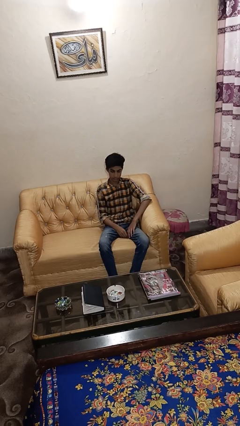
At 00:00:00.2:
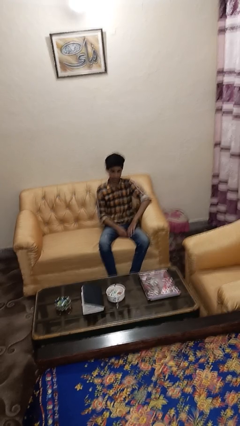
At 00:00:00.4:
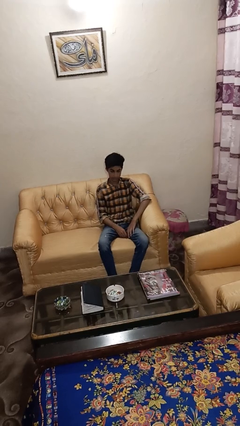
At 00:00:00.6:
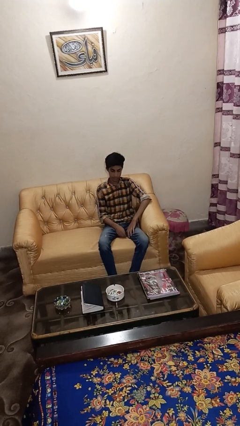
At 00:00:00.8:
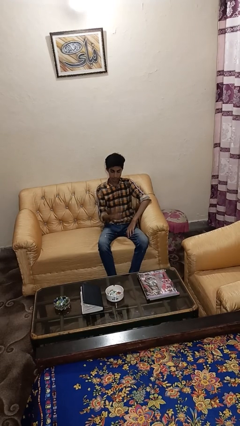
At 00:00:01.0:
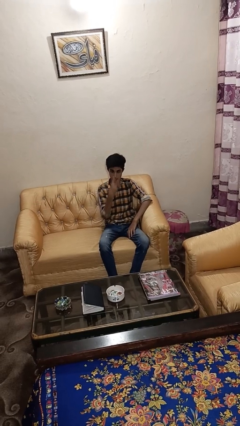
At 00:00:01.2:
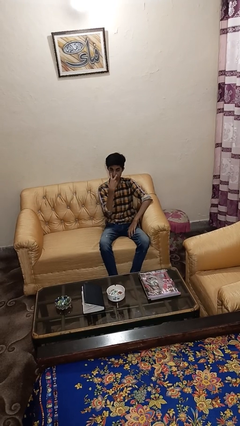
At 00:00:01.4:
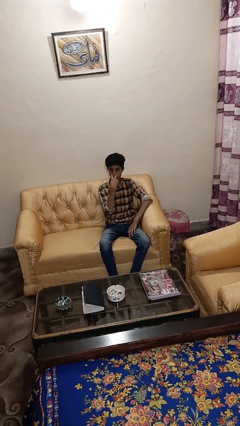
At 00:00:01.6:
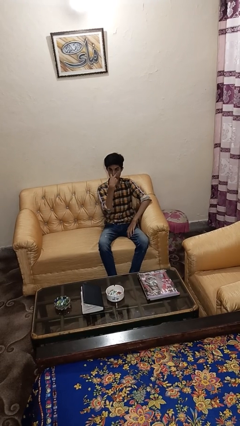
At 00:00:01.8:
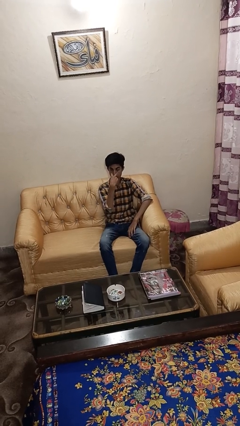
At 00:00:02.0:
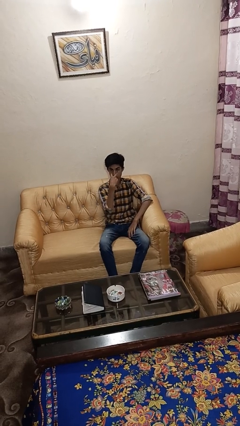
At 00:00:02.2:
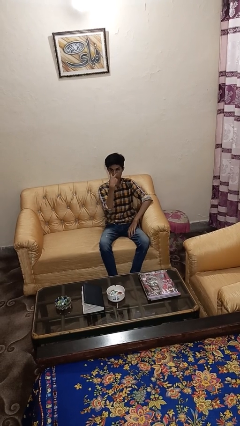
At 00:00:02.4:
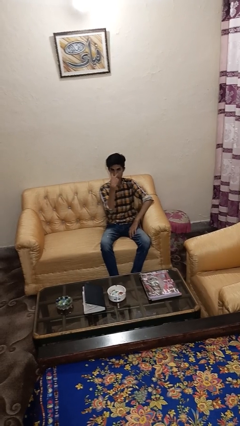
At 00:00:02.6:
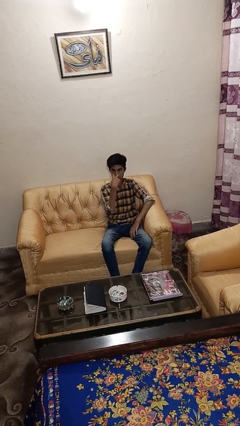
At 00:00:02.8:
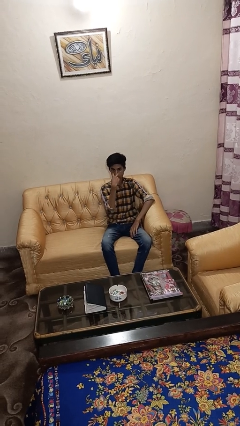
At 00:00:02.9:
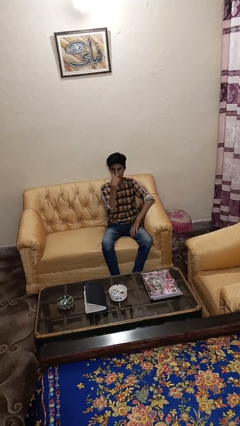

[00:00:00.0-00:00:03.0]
person gestures watch closely

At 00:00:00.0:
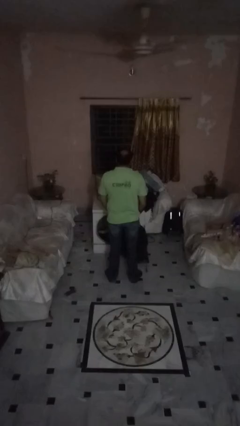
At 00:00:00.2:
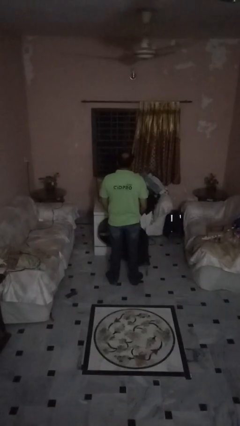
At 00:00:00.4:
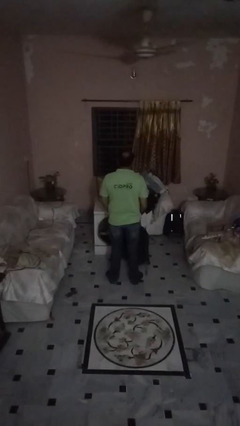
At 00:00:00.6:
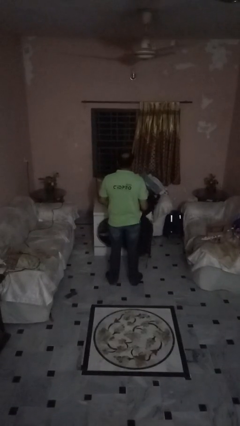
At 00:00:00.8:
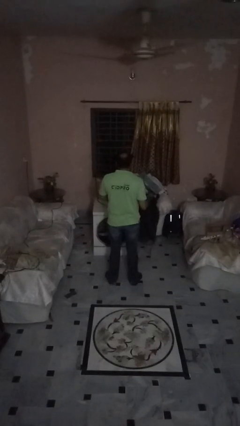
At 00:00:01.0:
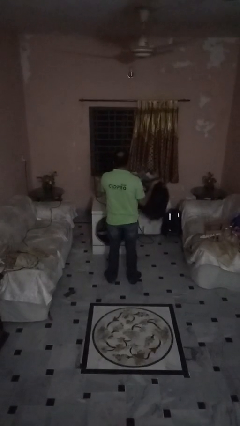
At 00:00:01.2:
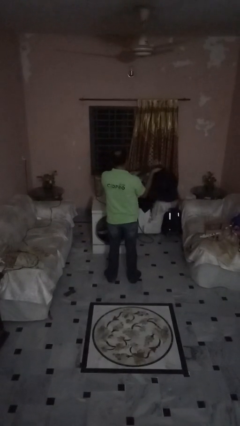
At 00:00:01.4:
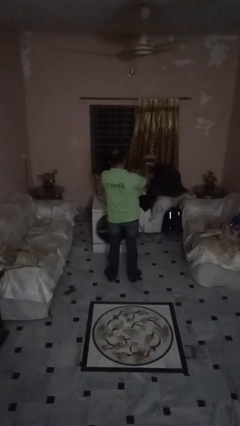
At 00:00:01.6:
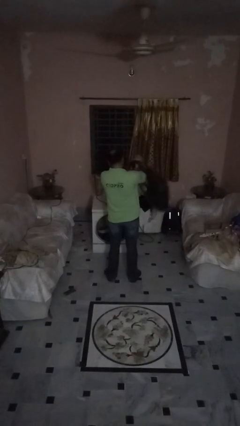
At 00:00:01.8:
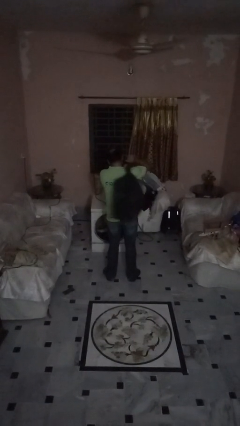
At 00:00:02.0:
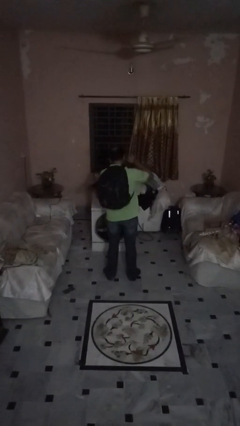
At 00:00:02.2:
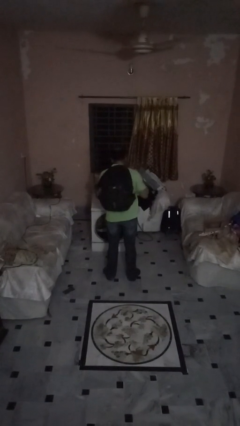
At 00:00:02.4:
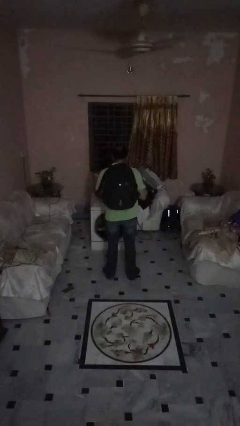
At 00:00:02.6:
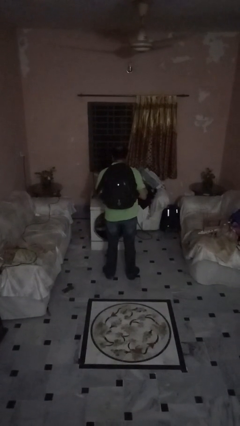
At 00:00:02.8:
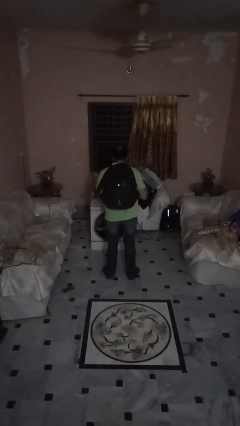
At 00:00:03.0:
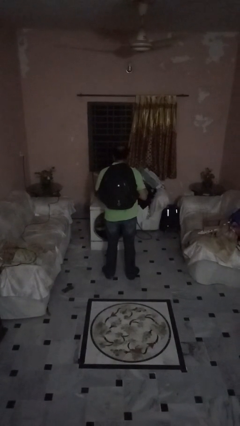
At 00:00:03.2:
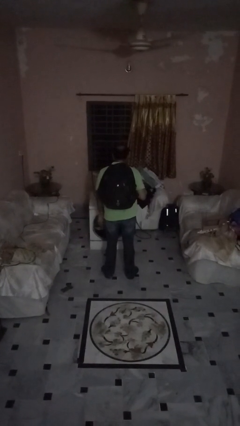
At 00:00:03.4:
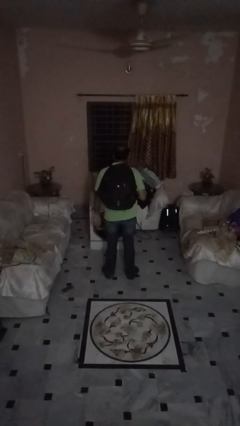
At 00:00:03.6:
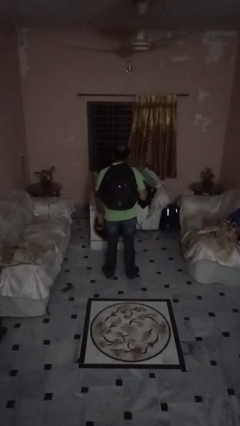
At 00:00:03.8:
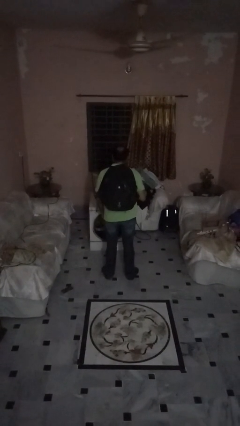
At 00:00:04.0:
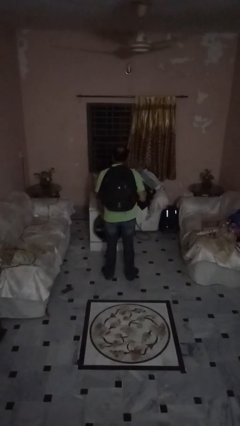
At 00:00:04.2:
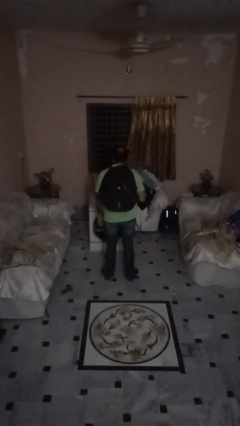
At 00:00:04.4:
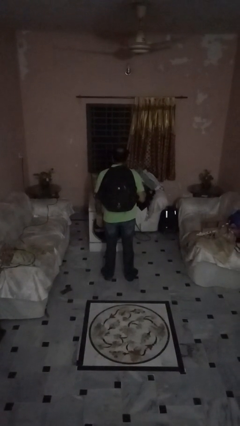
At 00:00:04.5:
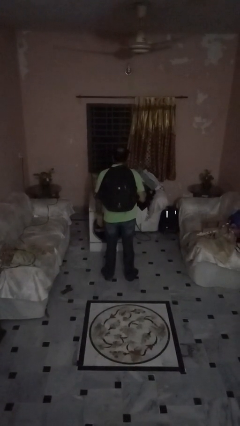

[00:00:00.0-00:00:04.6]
person puts on backpack

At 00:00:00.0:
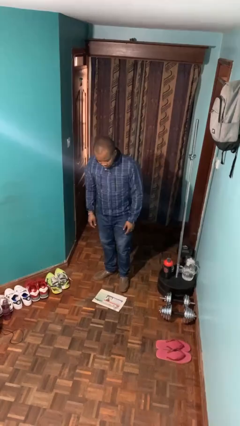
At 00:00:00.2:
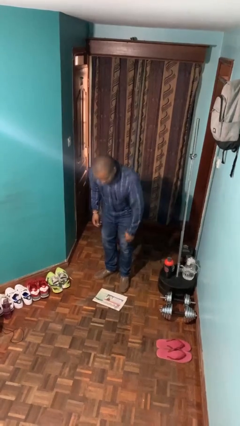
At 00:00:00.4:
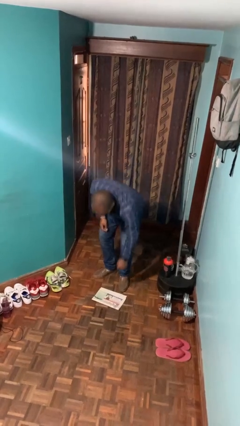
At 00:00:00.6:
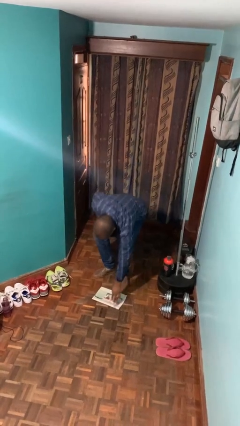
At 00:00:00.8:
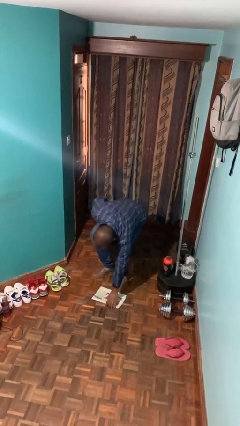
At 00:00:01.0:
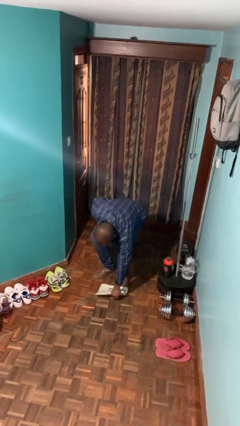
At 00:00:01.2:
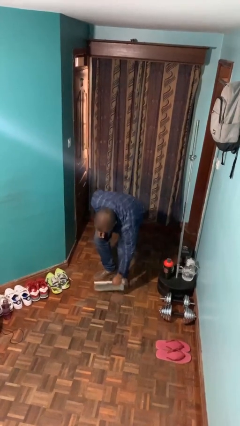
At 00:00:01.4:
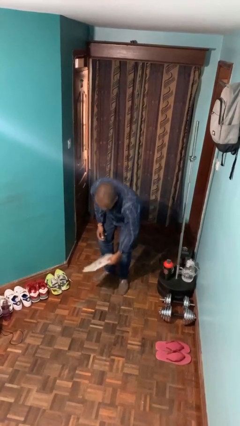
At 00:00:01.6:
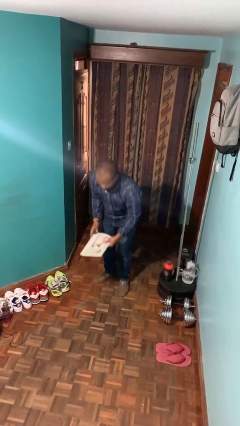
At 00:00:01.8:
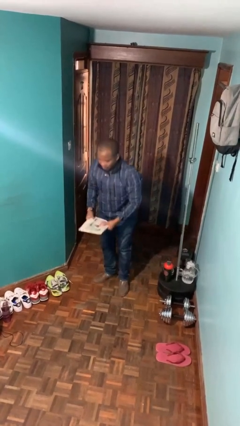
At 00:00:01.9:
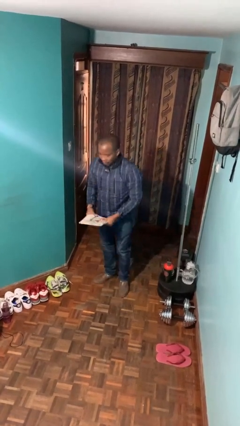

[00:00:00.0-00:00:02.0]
person picks up object from floor

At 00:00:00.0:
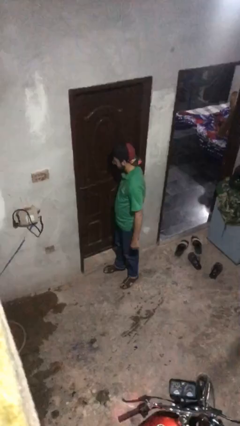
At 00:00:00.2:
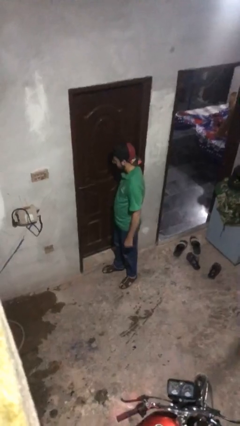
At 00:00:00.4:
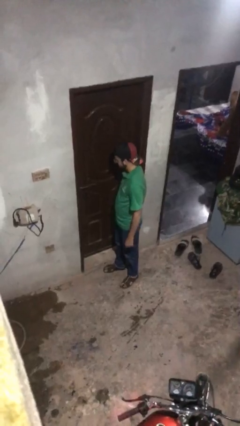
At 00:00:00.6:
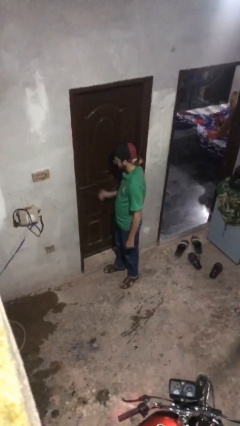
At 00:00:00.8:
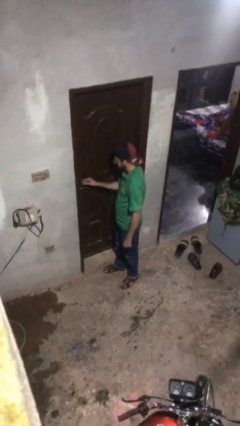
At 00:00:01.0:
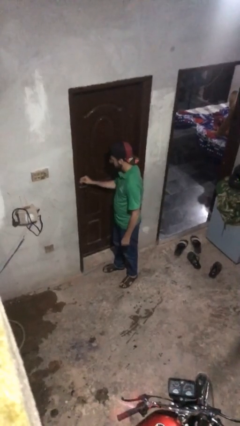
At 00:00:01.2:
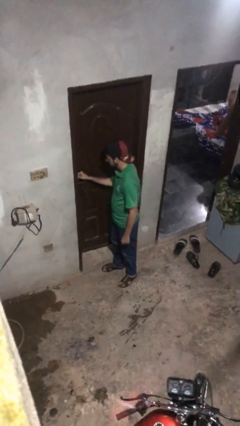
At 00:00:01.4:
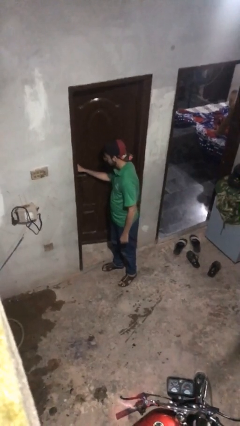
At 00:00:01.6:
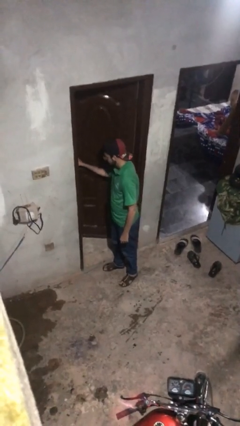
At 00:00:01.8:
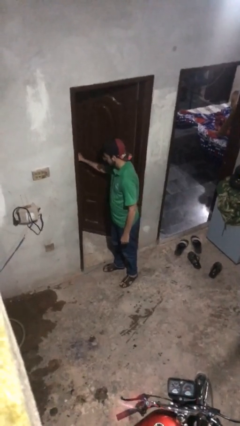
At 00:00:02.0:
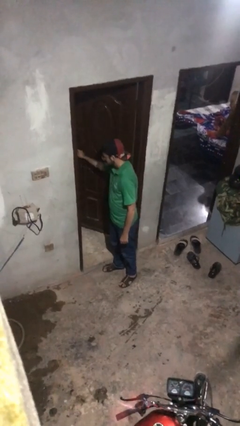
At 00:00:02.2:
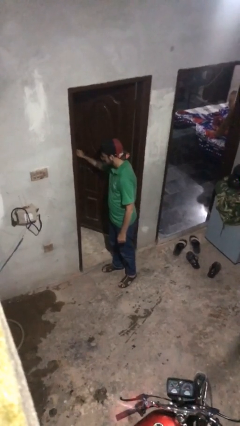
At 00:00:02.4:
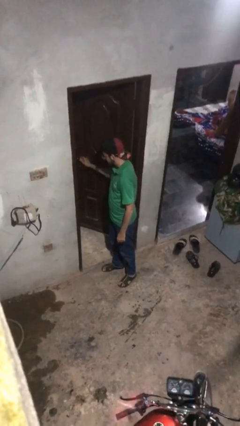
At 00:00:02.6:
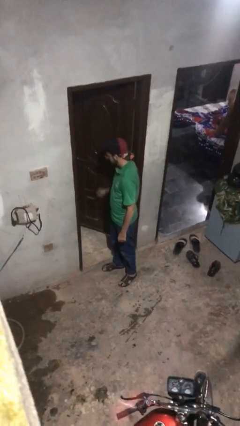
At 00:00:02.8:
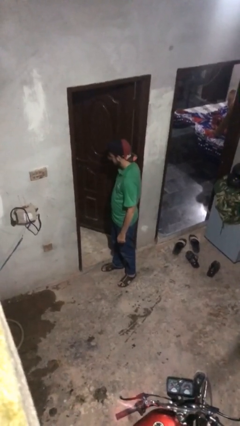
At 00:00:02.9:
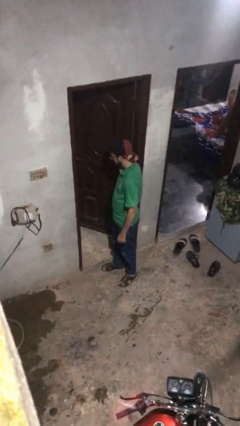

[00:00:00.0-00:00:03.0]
person opens facility door

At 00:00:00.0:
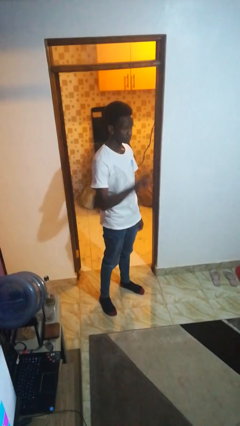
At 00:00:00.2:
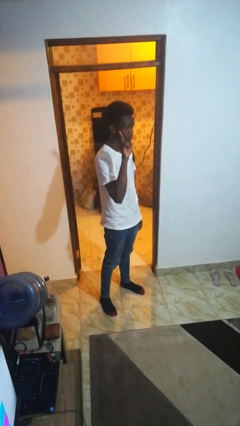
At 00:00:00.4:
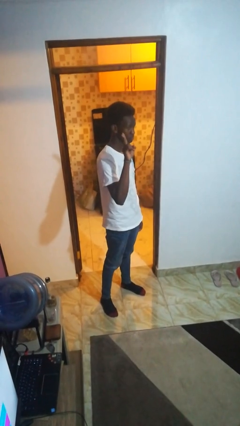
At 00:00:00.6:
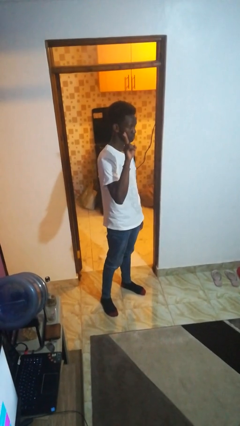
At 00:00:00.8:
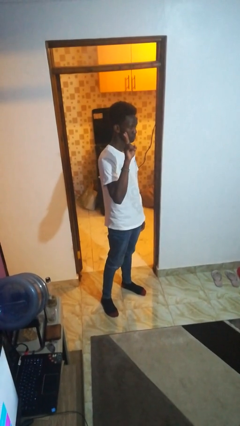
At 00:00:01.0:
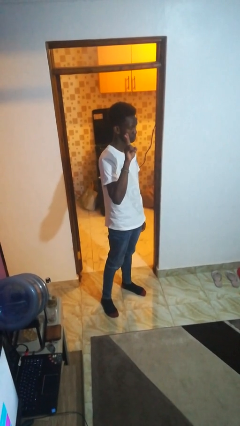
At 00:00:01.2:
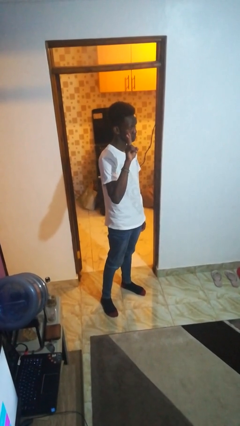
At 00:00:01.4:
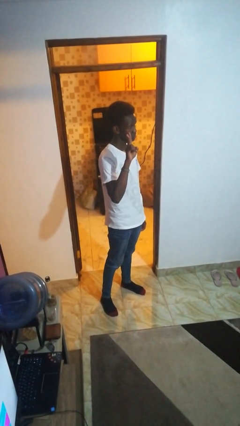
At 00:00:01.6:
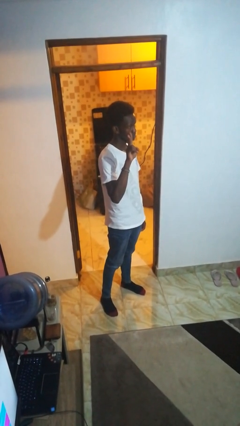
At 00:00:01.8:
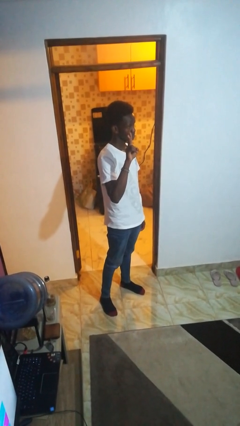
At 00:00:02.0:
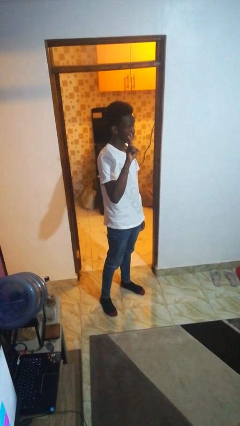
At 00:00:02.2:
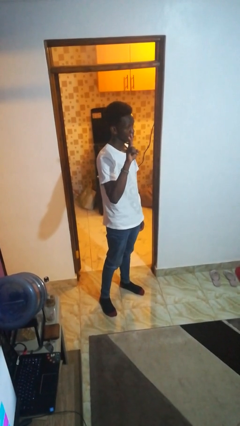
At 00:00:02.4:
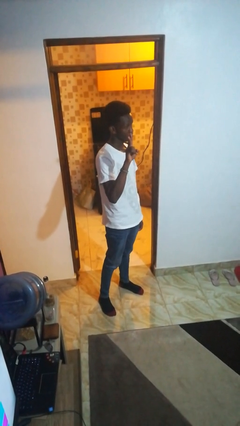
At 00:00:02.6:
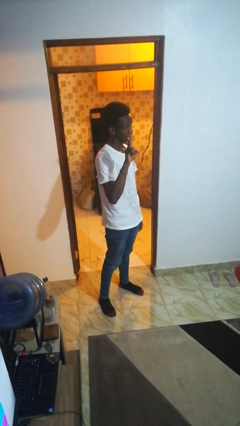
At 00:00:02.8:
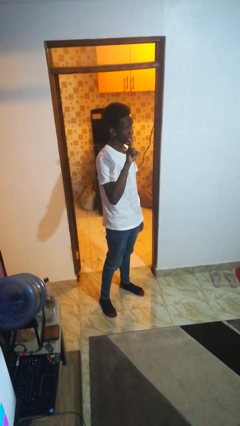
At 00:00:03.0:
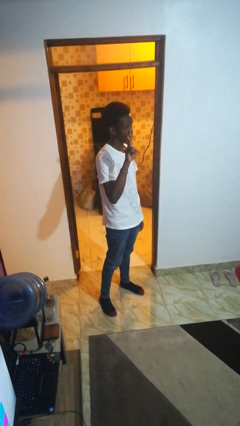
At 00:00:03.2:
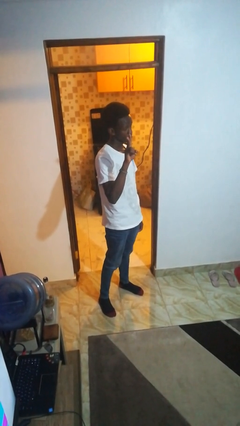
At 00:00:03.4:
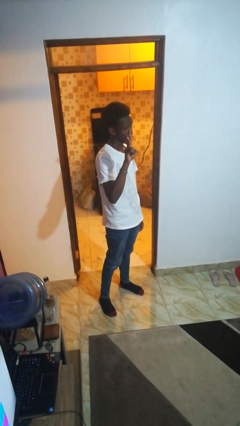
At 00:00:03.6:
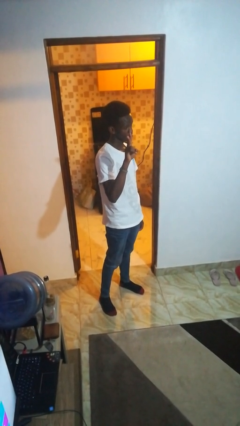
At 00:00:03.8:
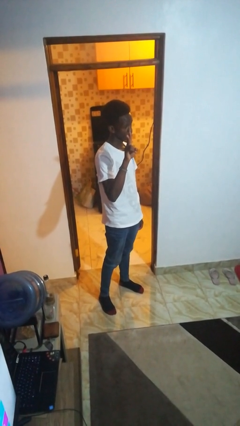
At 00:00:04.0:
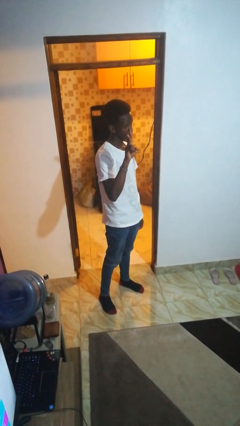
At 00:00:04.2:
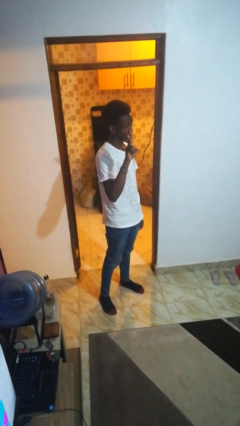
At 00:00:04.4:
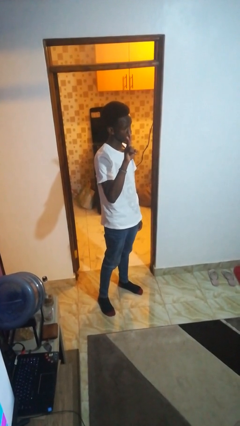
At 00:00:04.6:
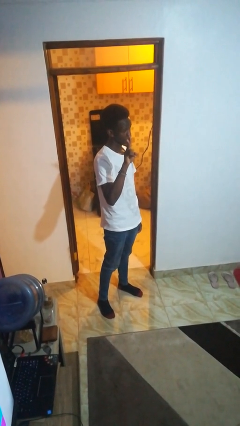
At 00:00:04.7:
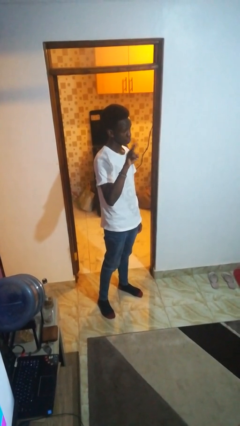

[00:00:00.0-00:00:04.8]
person gestures peace
